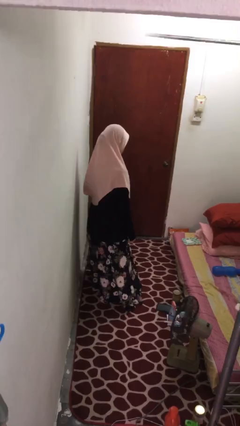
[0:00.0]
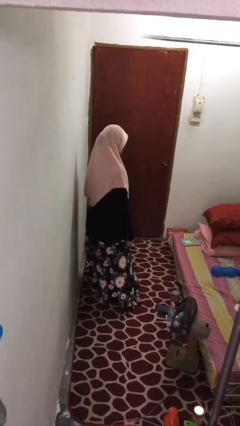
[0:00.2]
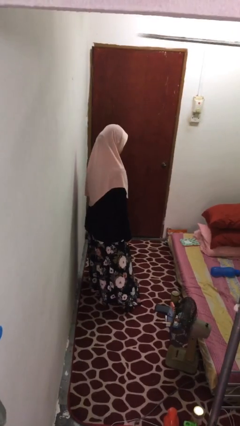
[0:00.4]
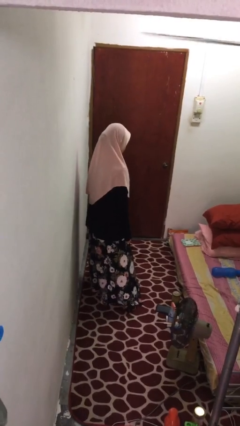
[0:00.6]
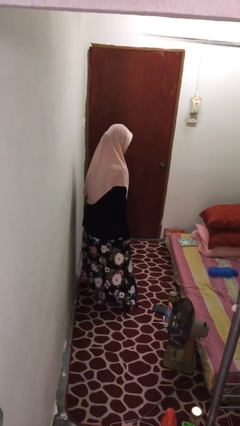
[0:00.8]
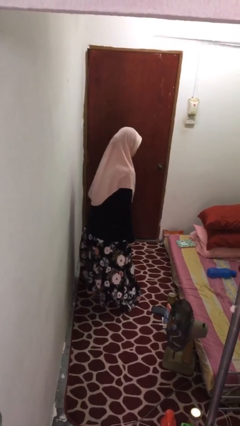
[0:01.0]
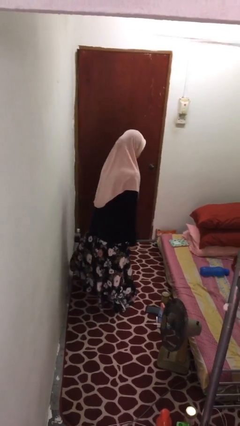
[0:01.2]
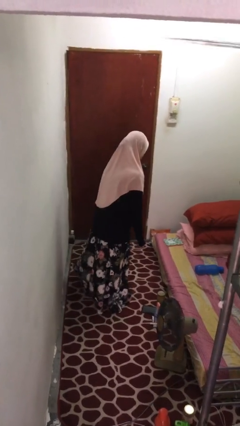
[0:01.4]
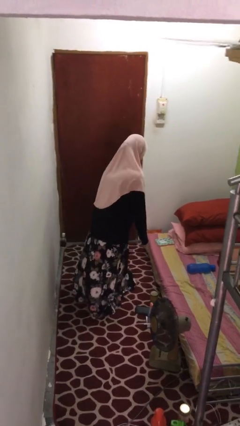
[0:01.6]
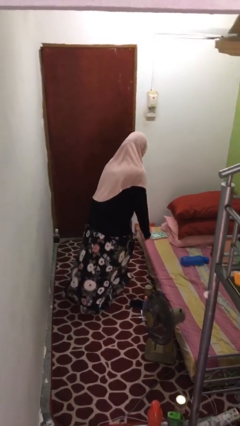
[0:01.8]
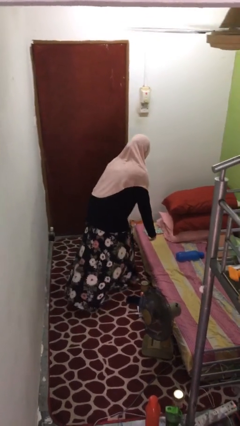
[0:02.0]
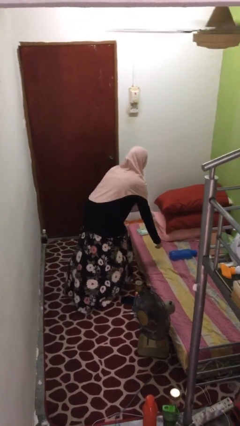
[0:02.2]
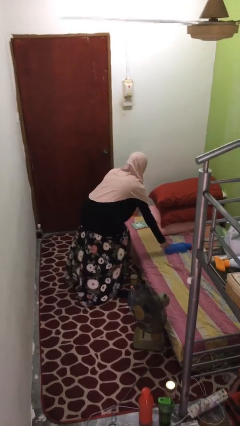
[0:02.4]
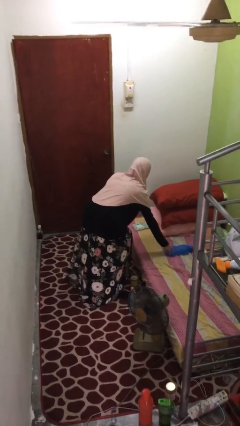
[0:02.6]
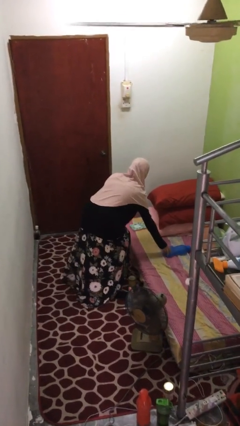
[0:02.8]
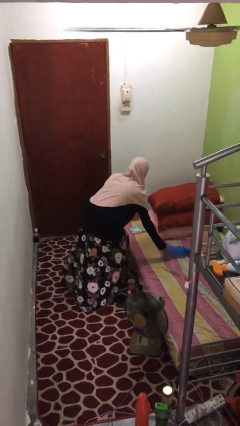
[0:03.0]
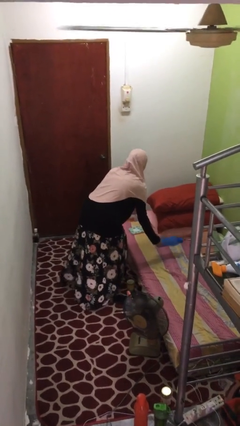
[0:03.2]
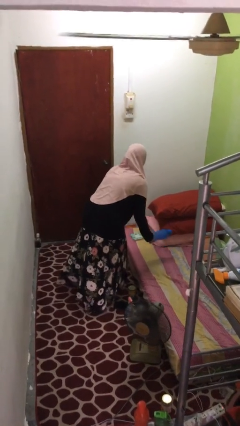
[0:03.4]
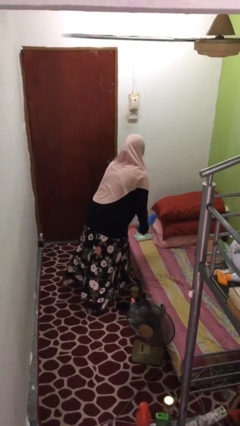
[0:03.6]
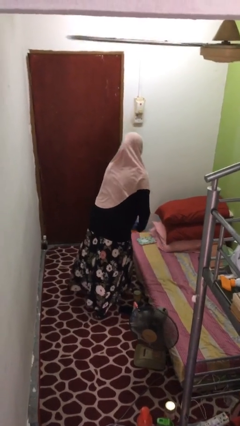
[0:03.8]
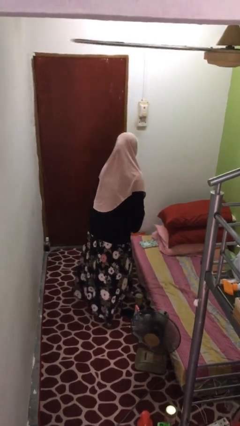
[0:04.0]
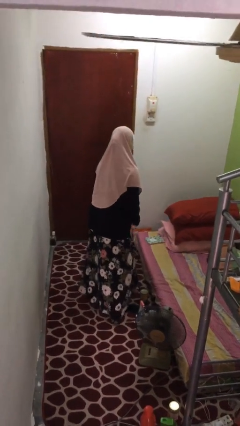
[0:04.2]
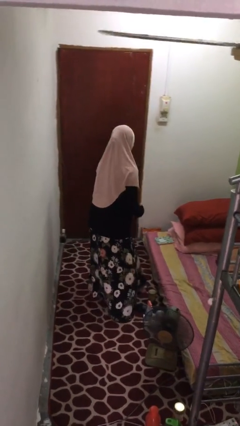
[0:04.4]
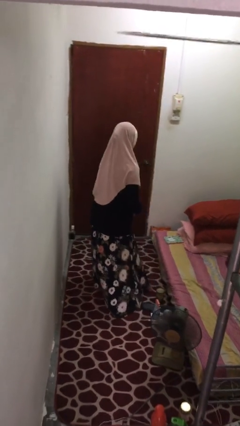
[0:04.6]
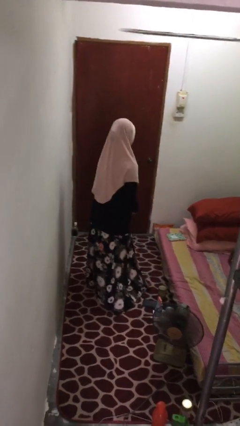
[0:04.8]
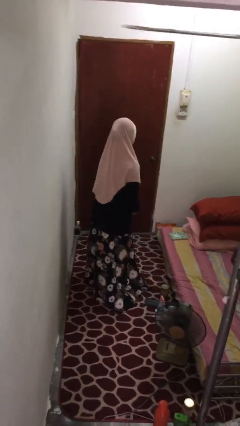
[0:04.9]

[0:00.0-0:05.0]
person picks up object from bed

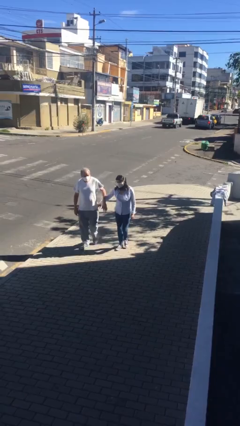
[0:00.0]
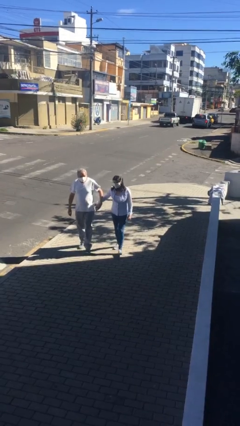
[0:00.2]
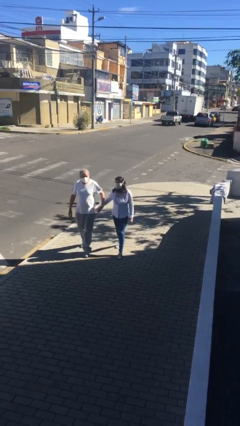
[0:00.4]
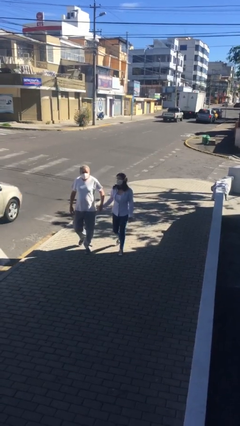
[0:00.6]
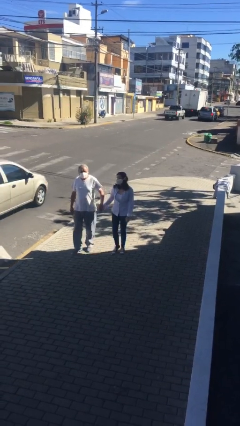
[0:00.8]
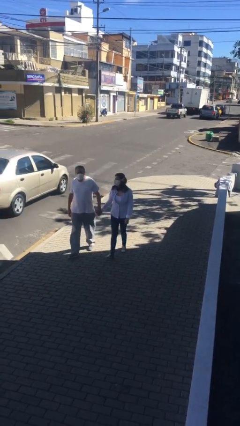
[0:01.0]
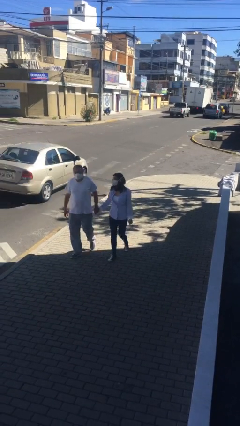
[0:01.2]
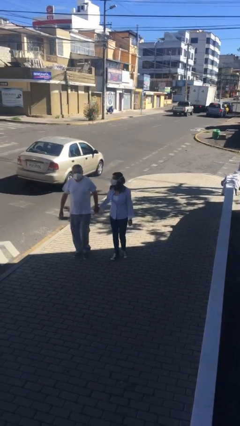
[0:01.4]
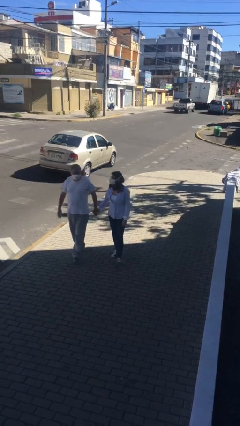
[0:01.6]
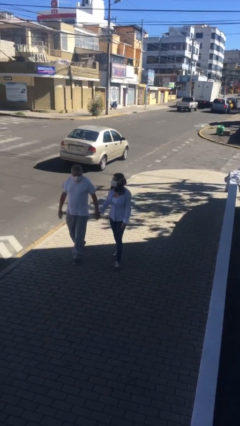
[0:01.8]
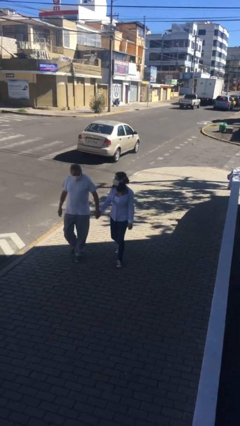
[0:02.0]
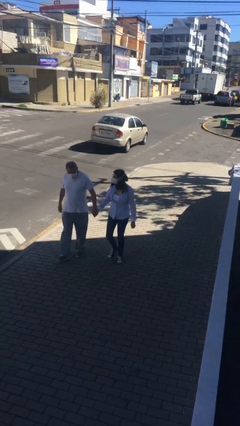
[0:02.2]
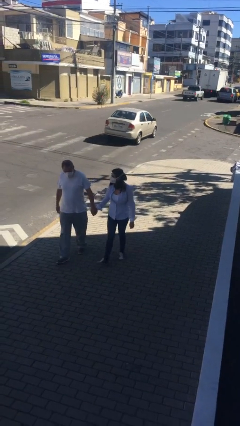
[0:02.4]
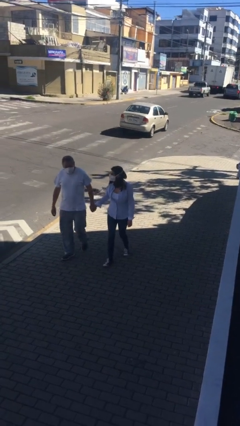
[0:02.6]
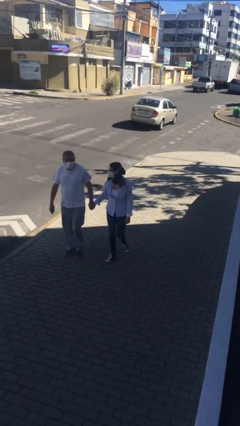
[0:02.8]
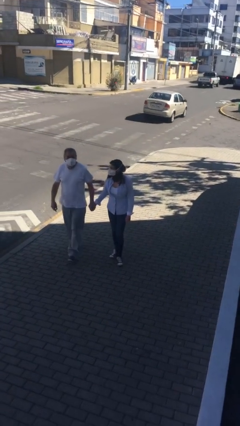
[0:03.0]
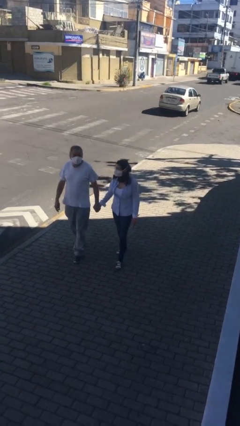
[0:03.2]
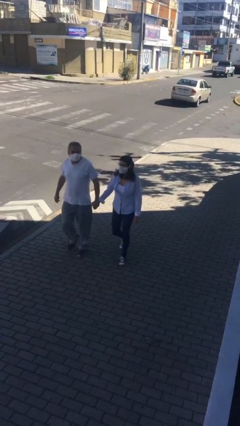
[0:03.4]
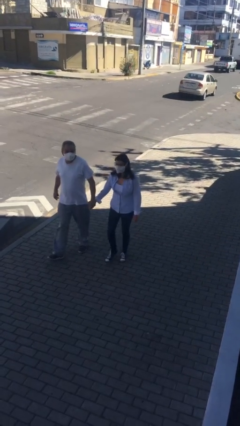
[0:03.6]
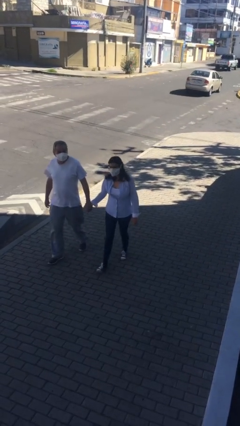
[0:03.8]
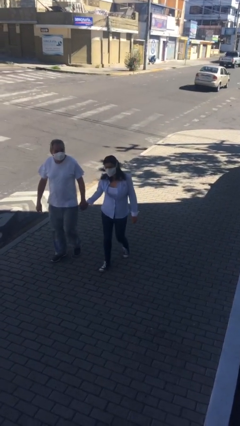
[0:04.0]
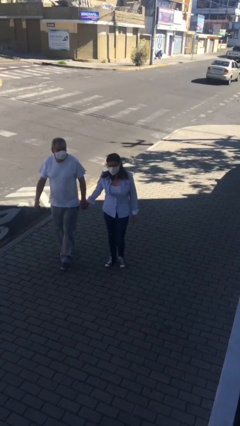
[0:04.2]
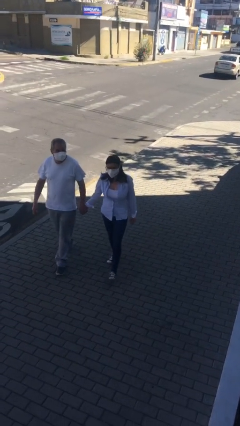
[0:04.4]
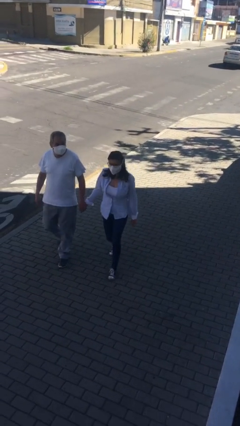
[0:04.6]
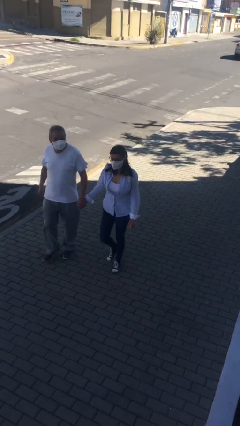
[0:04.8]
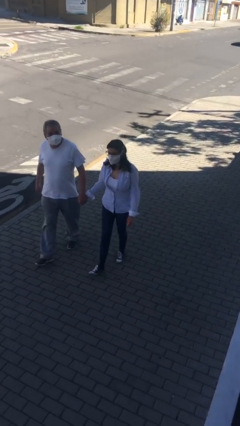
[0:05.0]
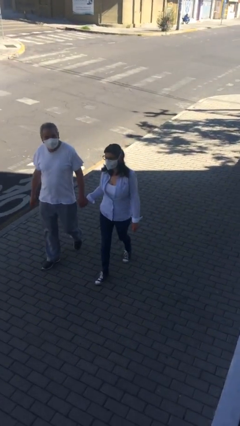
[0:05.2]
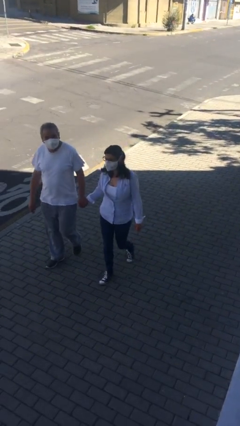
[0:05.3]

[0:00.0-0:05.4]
person holds hand

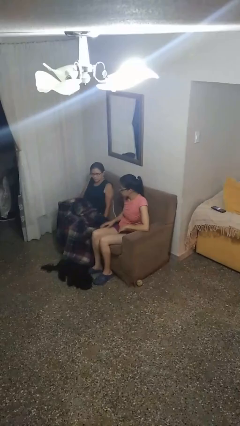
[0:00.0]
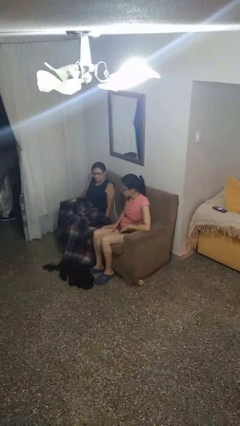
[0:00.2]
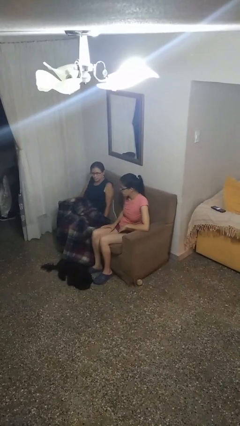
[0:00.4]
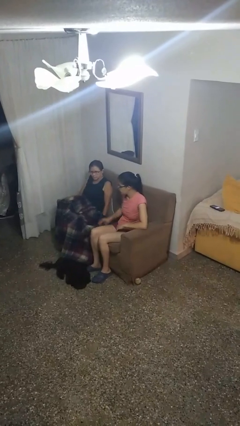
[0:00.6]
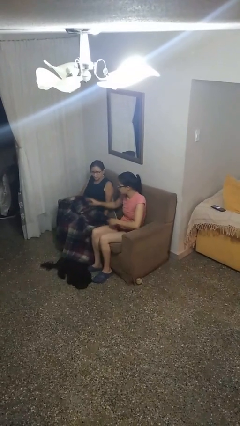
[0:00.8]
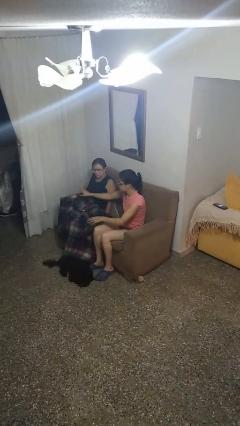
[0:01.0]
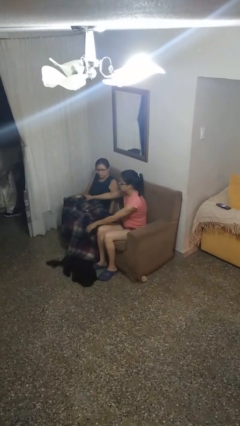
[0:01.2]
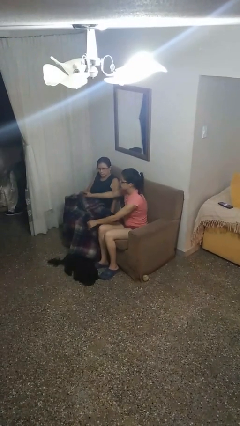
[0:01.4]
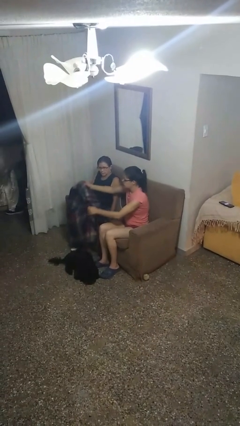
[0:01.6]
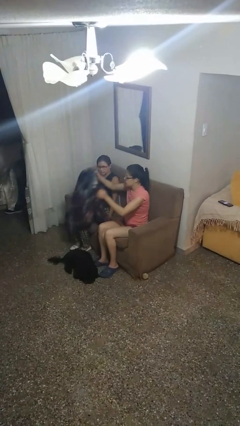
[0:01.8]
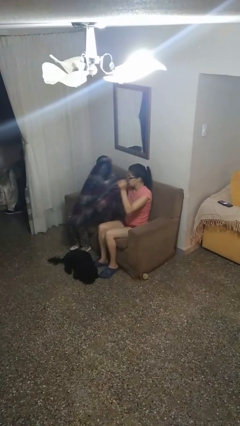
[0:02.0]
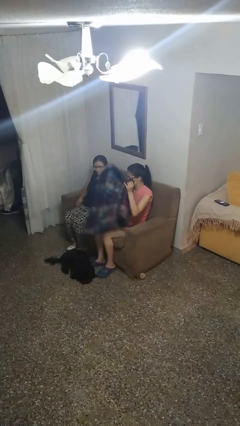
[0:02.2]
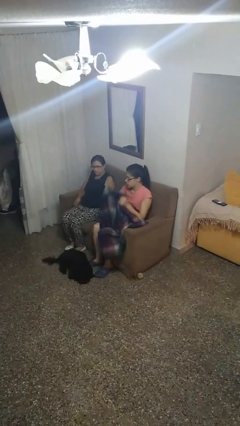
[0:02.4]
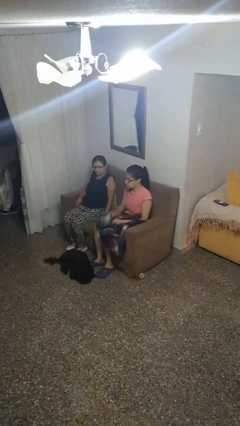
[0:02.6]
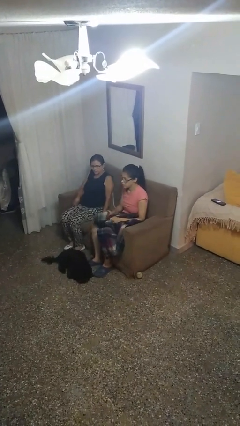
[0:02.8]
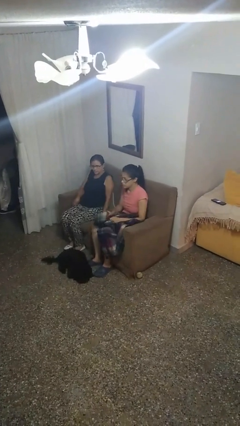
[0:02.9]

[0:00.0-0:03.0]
person uncovers friend with blanket

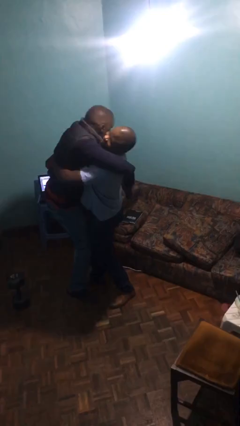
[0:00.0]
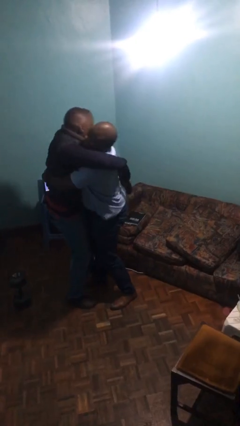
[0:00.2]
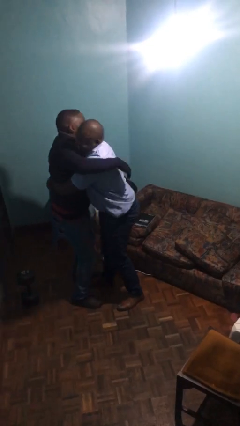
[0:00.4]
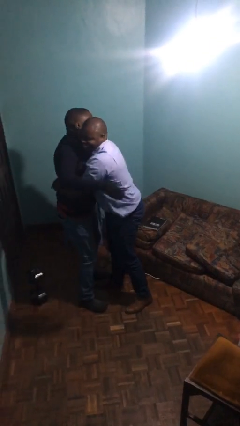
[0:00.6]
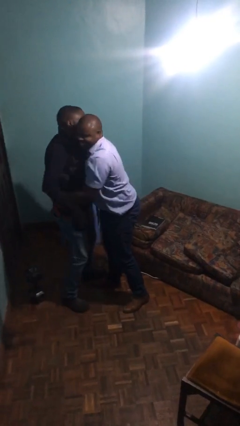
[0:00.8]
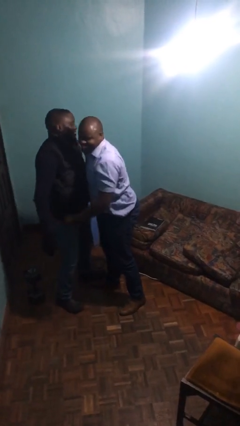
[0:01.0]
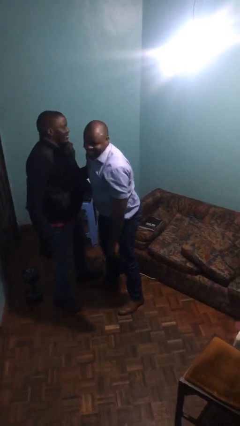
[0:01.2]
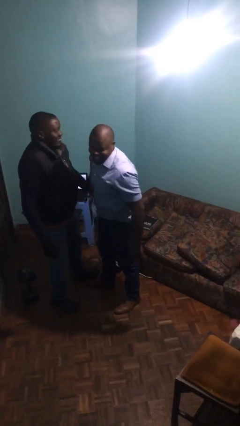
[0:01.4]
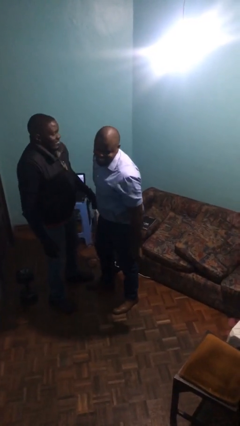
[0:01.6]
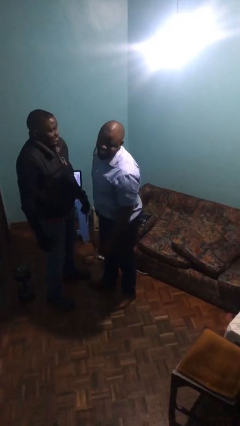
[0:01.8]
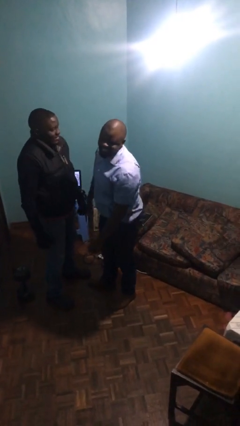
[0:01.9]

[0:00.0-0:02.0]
person puts down person

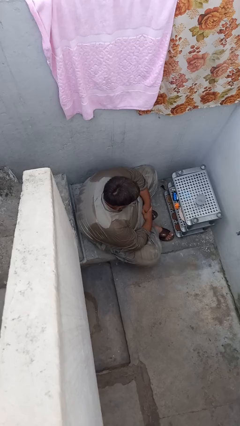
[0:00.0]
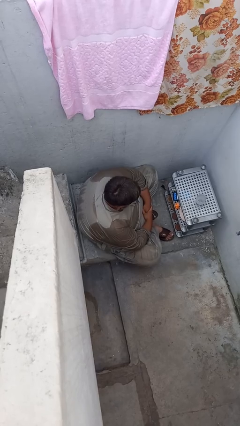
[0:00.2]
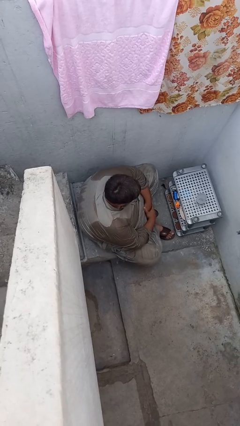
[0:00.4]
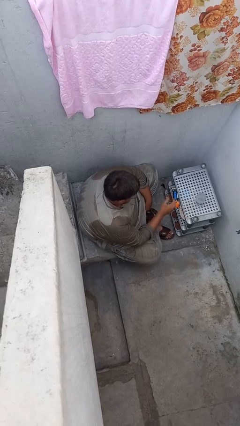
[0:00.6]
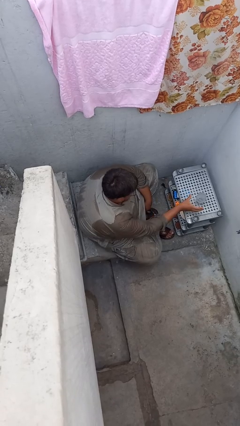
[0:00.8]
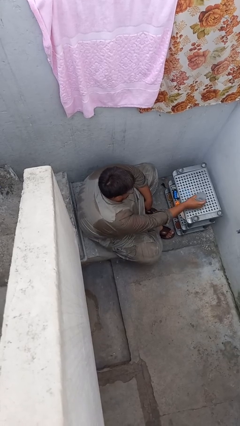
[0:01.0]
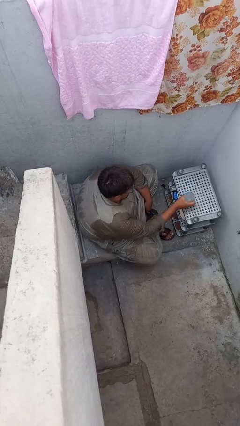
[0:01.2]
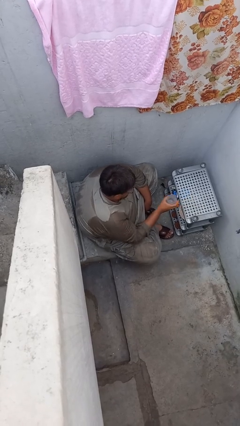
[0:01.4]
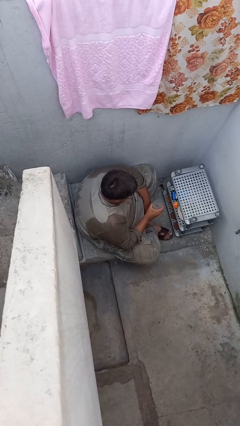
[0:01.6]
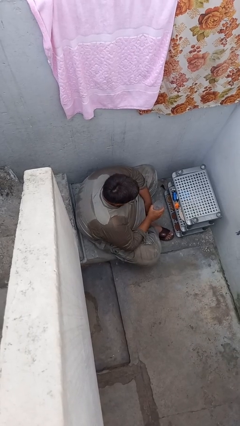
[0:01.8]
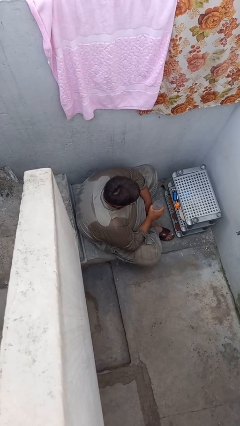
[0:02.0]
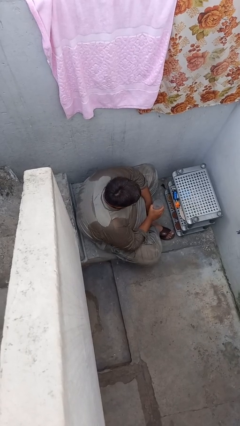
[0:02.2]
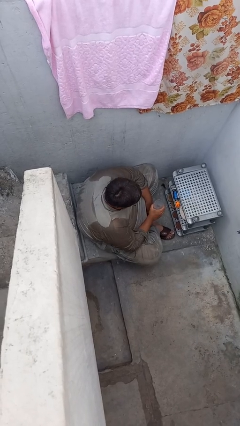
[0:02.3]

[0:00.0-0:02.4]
person picks up object from table
